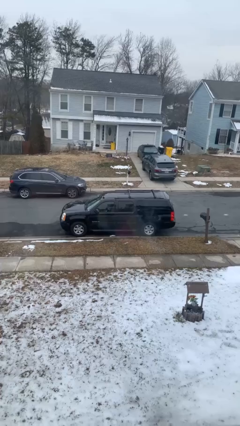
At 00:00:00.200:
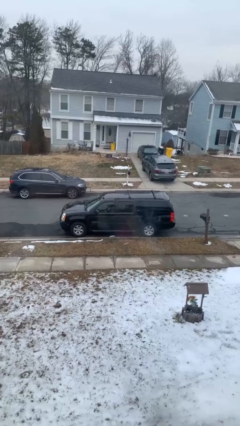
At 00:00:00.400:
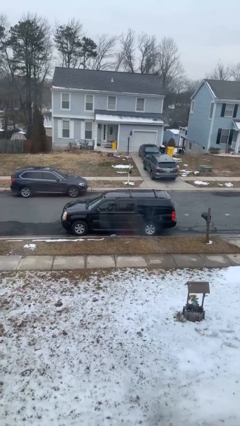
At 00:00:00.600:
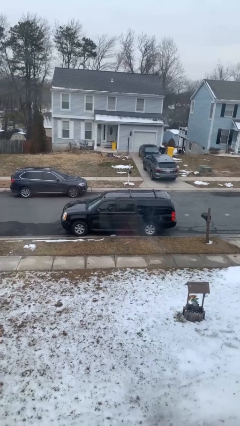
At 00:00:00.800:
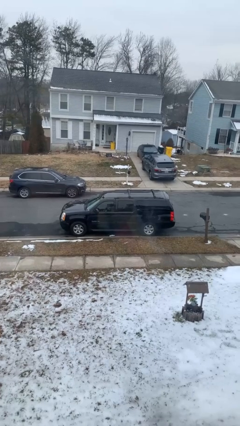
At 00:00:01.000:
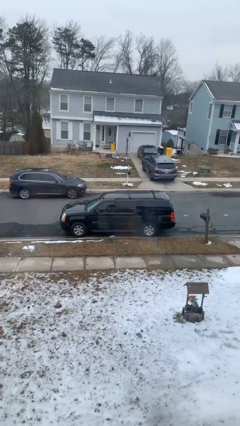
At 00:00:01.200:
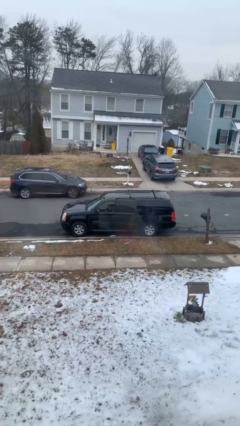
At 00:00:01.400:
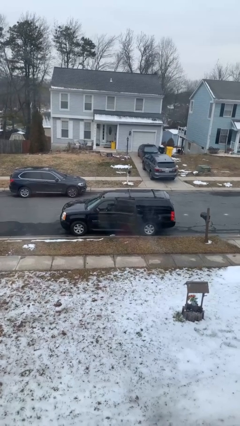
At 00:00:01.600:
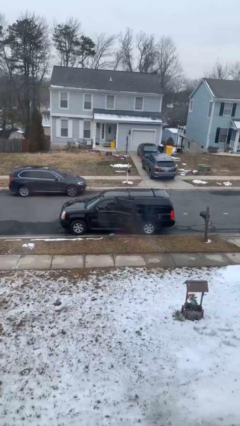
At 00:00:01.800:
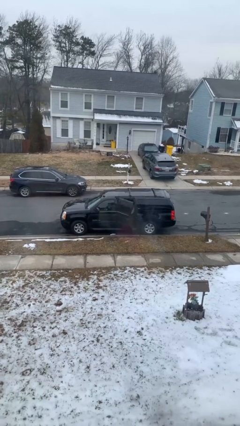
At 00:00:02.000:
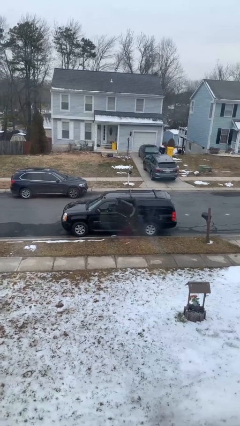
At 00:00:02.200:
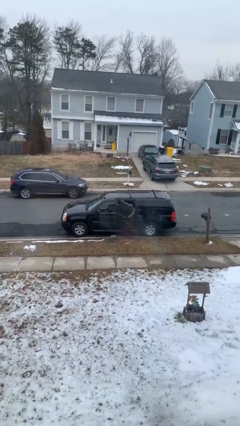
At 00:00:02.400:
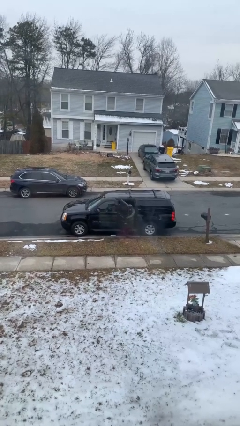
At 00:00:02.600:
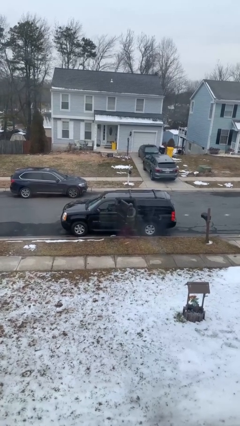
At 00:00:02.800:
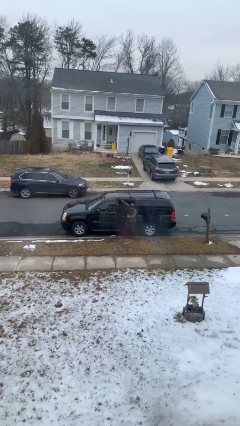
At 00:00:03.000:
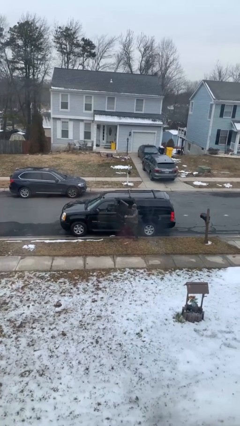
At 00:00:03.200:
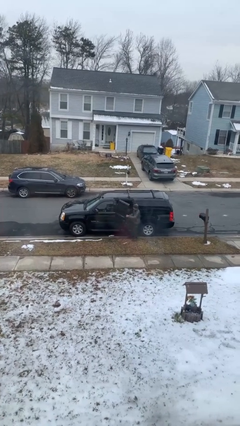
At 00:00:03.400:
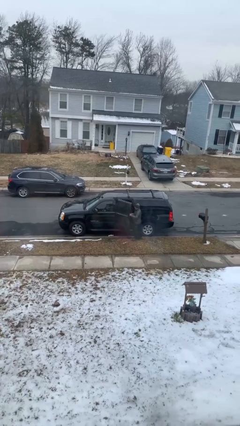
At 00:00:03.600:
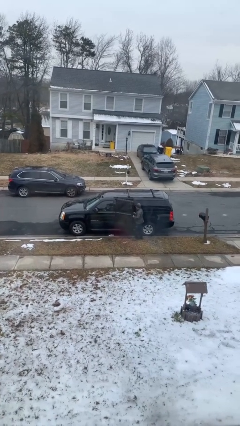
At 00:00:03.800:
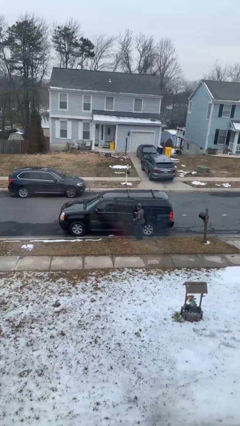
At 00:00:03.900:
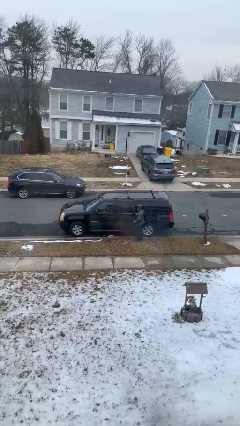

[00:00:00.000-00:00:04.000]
car drops off person

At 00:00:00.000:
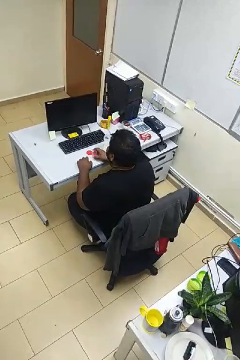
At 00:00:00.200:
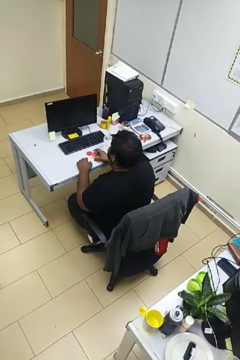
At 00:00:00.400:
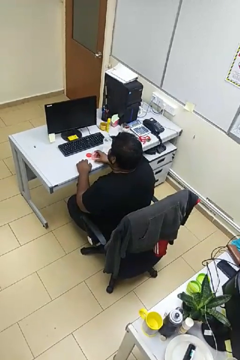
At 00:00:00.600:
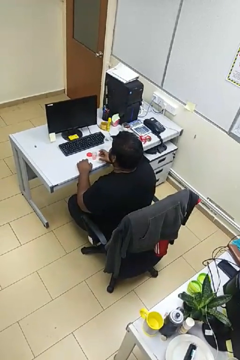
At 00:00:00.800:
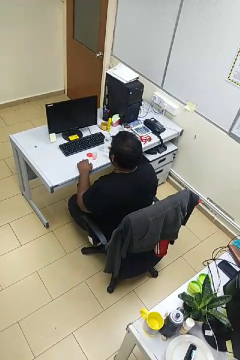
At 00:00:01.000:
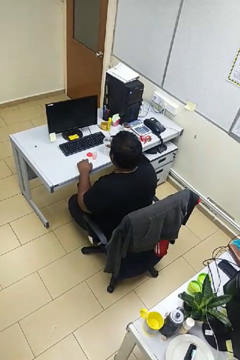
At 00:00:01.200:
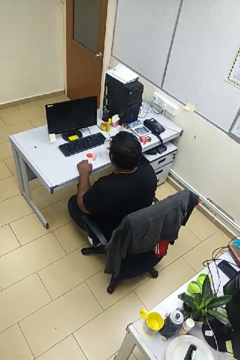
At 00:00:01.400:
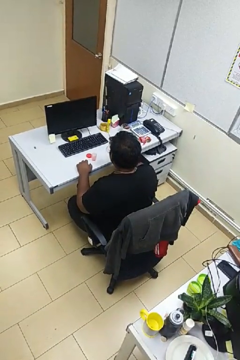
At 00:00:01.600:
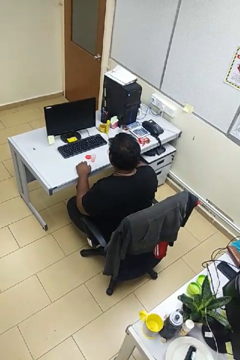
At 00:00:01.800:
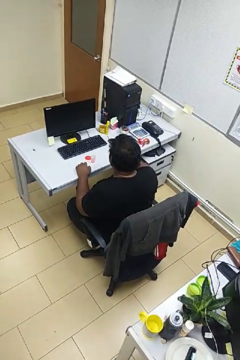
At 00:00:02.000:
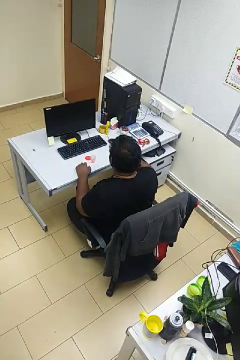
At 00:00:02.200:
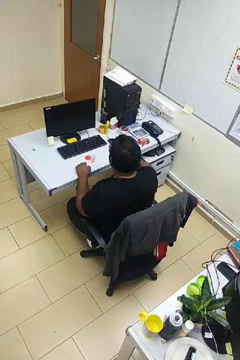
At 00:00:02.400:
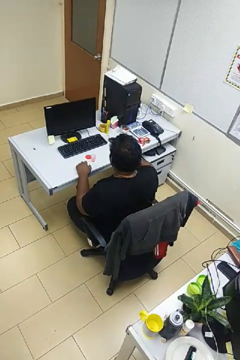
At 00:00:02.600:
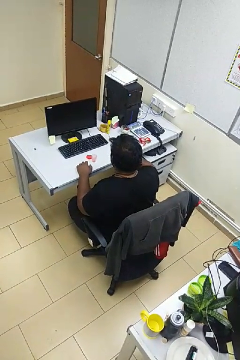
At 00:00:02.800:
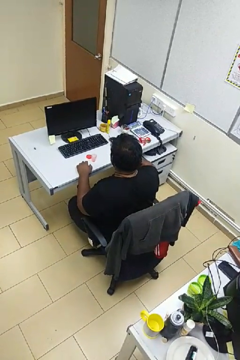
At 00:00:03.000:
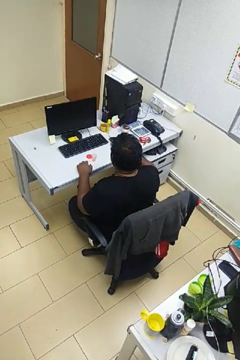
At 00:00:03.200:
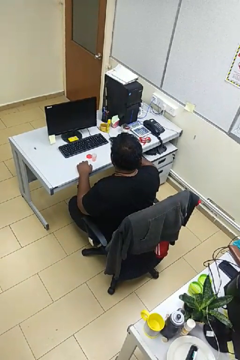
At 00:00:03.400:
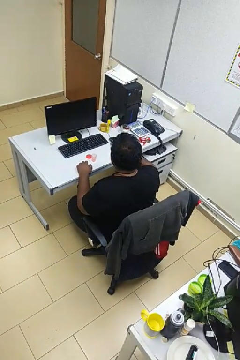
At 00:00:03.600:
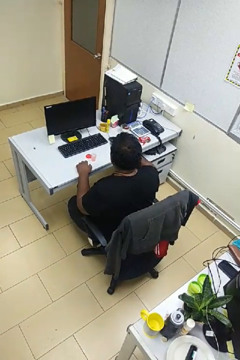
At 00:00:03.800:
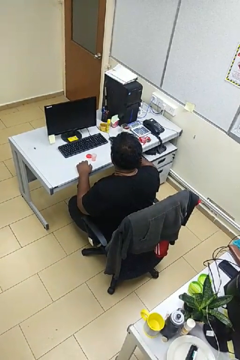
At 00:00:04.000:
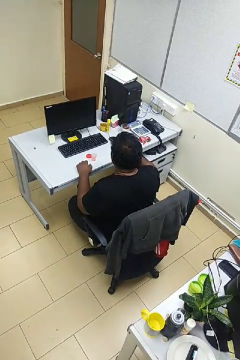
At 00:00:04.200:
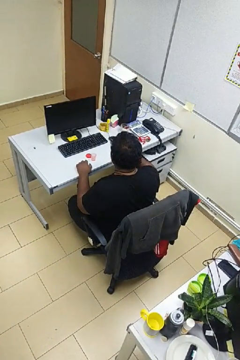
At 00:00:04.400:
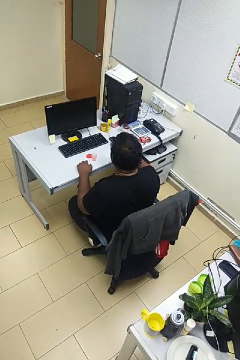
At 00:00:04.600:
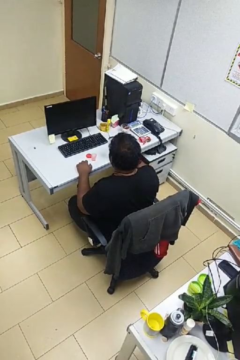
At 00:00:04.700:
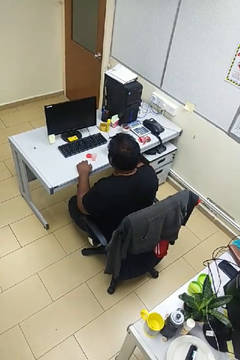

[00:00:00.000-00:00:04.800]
person drinks from cup

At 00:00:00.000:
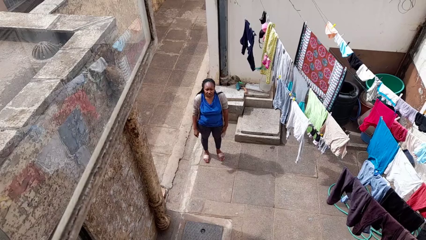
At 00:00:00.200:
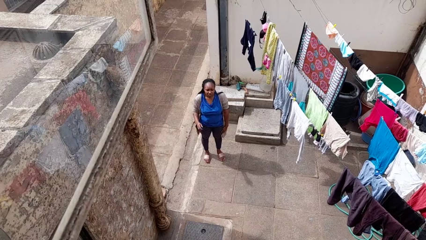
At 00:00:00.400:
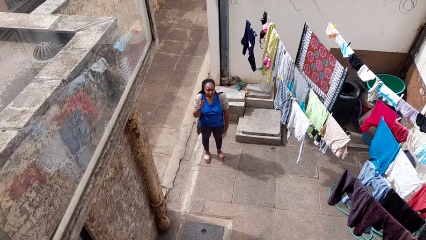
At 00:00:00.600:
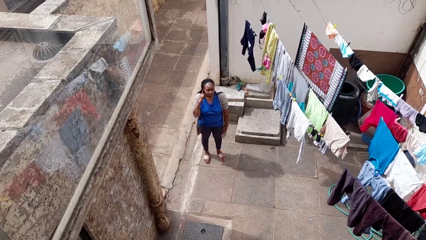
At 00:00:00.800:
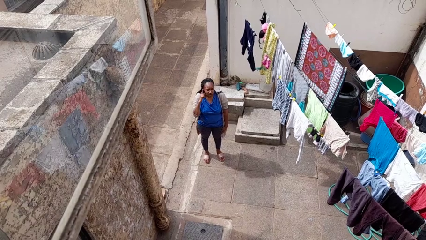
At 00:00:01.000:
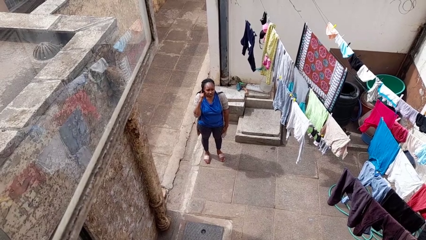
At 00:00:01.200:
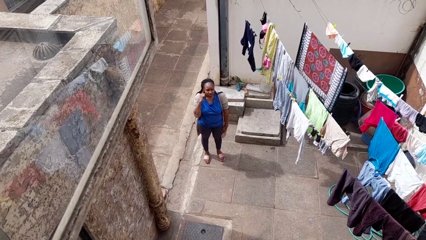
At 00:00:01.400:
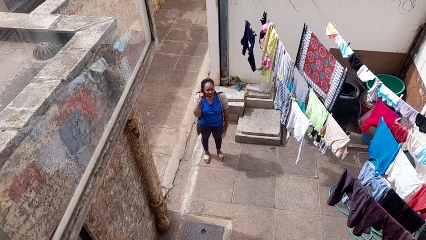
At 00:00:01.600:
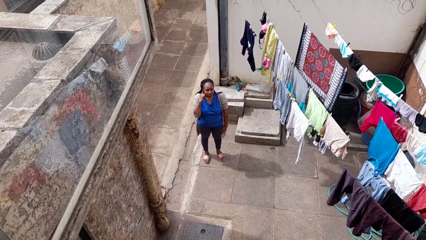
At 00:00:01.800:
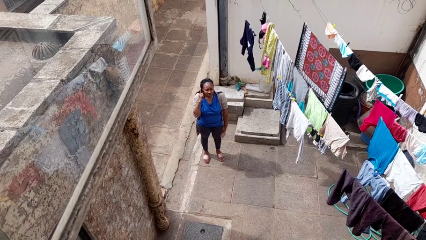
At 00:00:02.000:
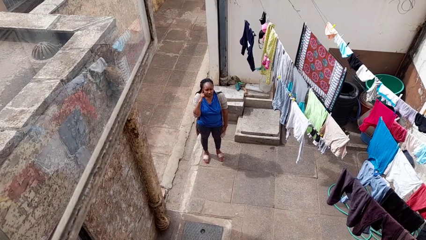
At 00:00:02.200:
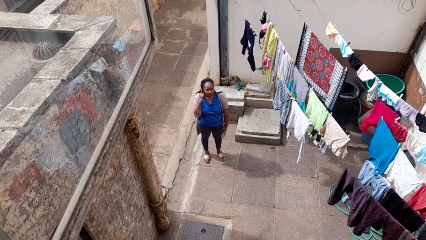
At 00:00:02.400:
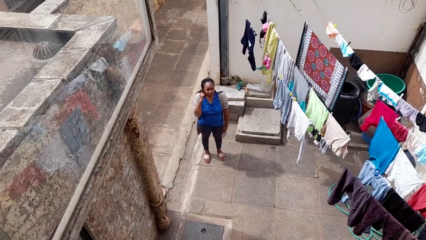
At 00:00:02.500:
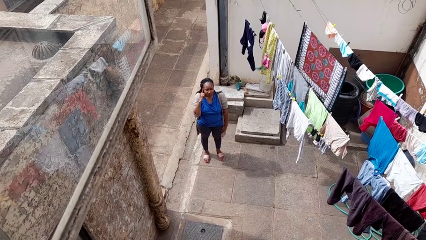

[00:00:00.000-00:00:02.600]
person gestures listen closely

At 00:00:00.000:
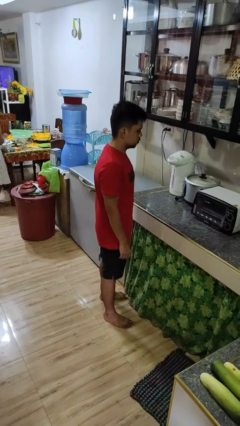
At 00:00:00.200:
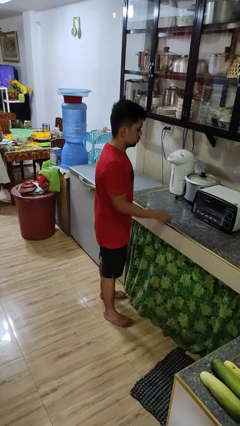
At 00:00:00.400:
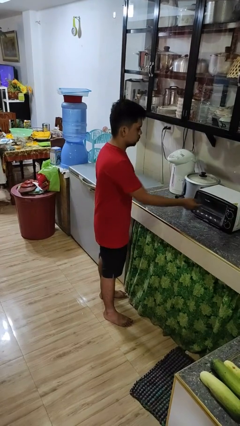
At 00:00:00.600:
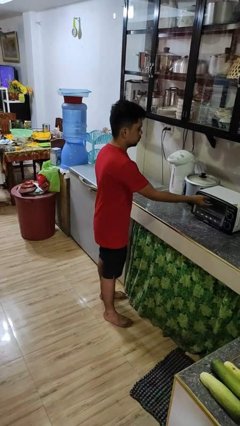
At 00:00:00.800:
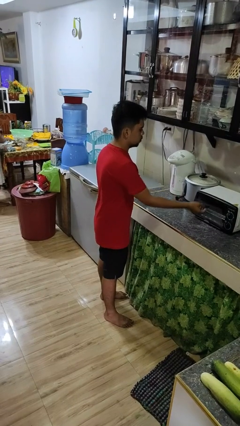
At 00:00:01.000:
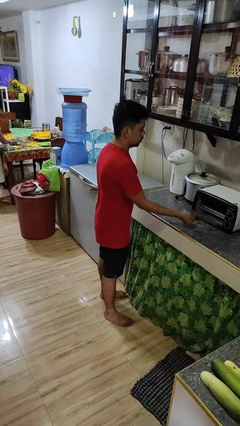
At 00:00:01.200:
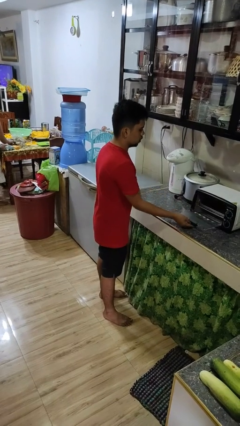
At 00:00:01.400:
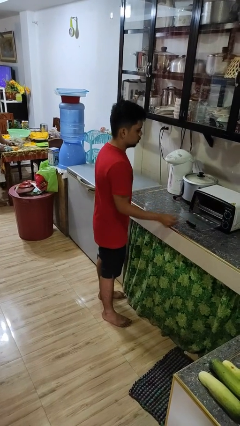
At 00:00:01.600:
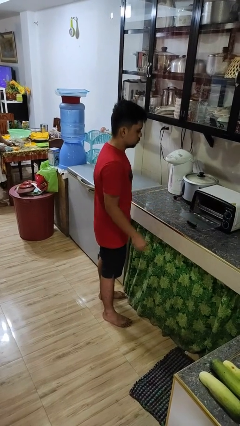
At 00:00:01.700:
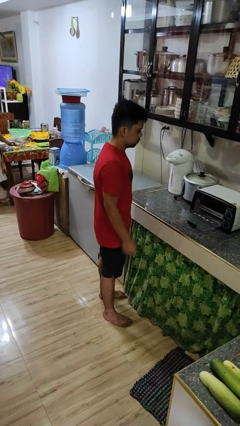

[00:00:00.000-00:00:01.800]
person opens microwave

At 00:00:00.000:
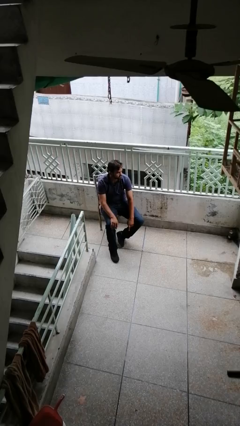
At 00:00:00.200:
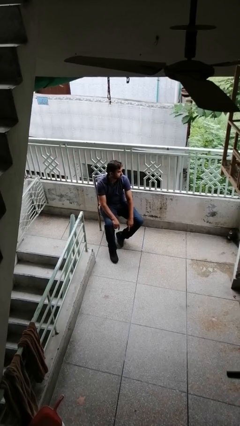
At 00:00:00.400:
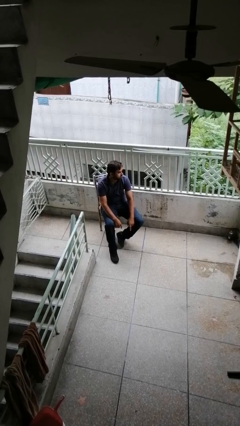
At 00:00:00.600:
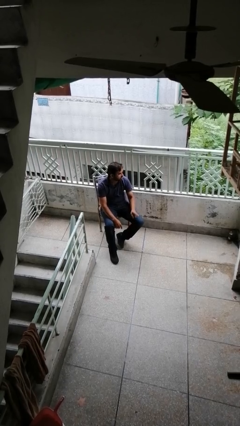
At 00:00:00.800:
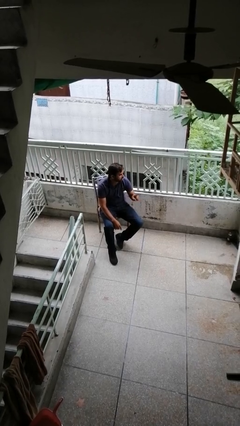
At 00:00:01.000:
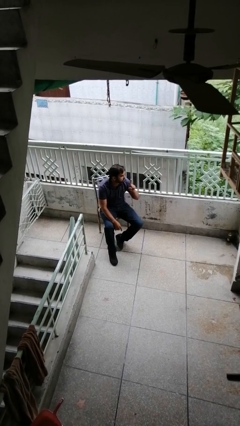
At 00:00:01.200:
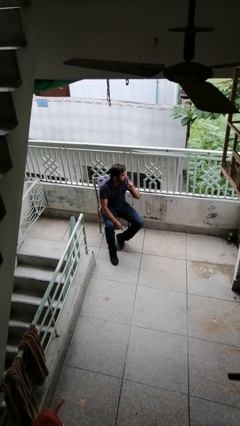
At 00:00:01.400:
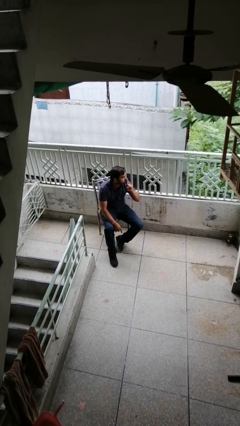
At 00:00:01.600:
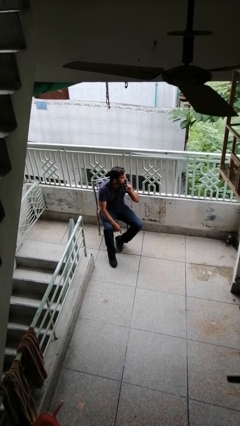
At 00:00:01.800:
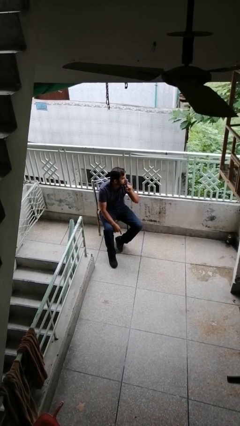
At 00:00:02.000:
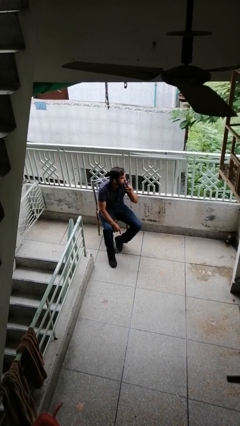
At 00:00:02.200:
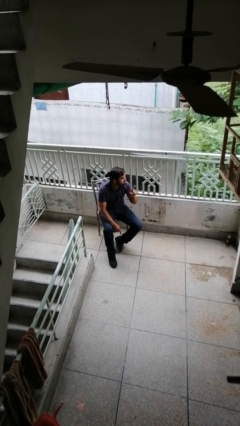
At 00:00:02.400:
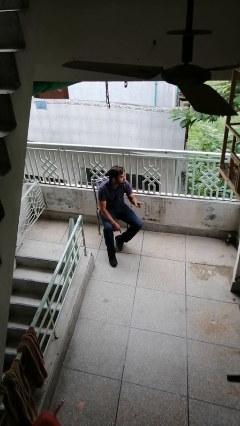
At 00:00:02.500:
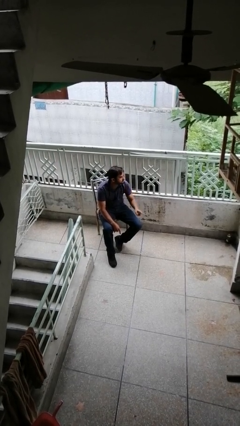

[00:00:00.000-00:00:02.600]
person gestures be quiet

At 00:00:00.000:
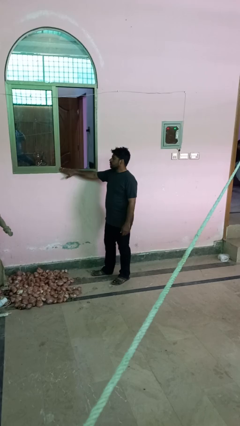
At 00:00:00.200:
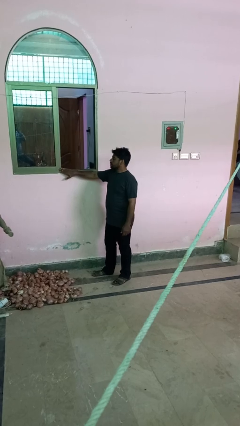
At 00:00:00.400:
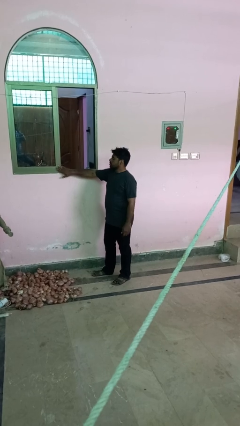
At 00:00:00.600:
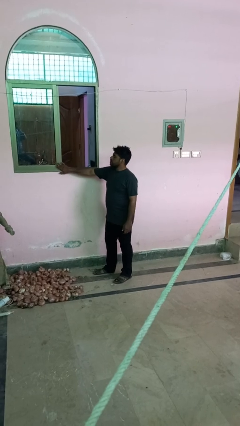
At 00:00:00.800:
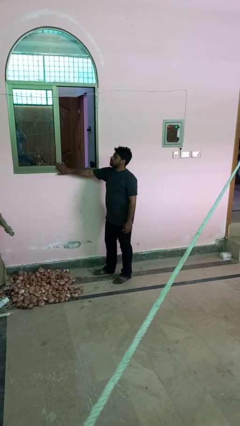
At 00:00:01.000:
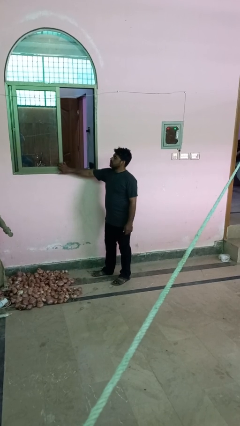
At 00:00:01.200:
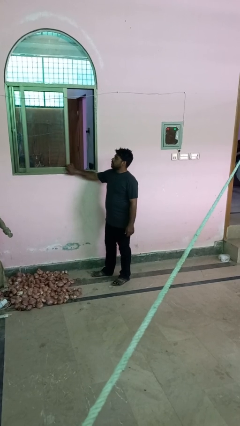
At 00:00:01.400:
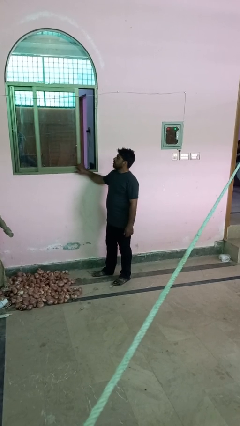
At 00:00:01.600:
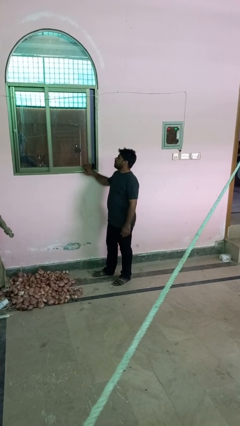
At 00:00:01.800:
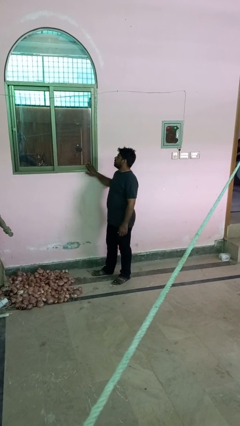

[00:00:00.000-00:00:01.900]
person closes sliding door

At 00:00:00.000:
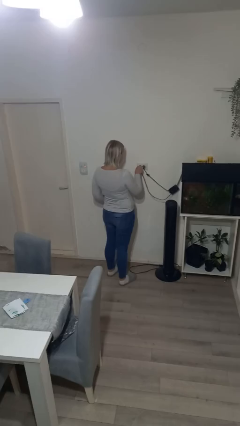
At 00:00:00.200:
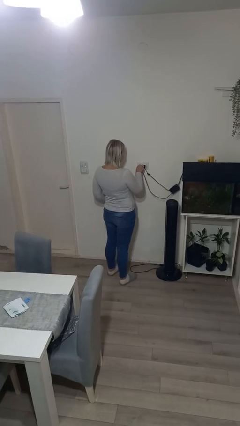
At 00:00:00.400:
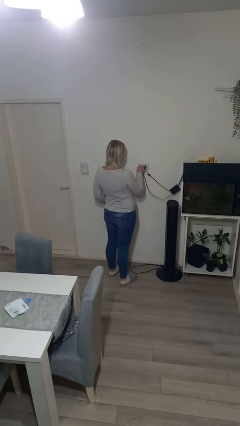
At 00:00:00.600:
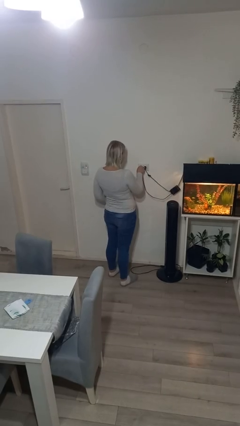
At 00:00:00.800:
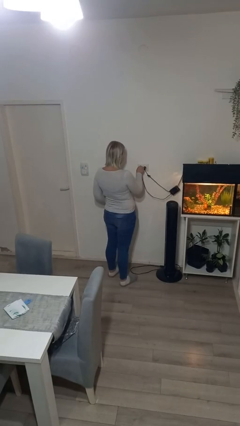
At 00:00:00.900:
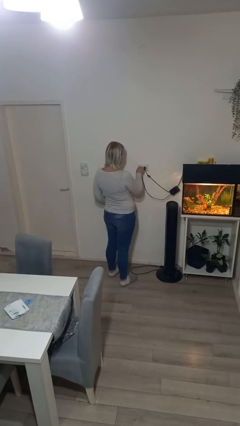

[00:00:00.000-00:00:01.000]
person plugs into electrical socket
